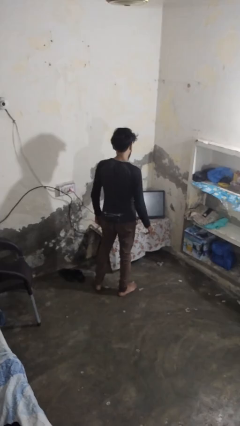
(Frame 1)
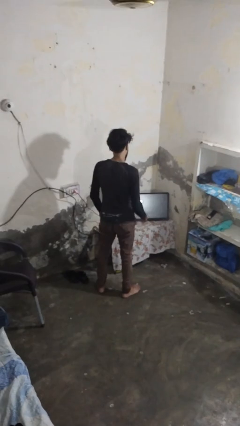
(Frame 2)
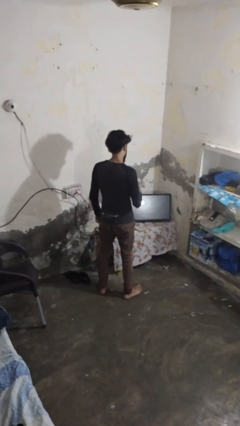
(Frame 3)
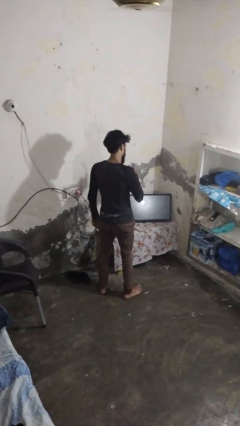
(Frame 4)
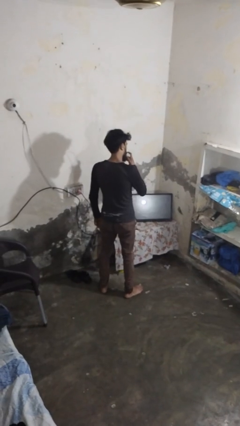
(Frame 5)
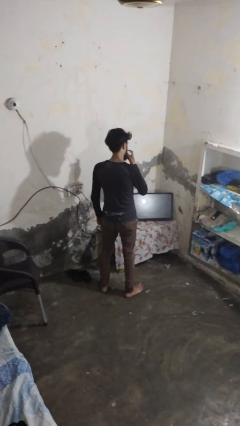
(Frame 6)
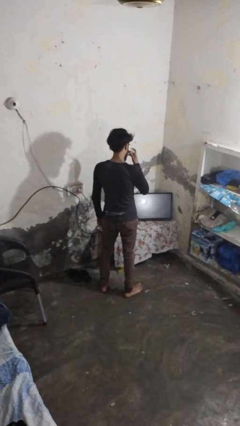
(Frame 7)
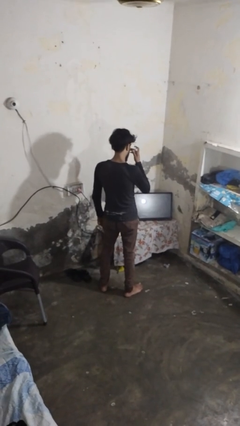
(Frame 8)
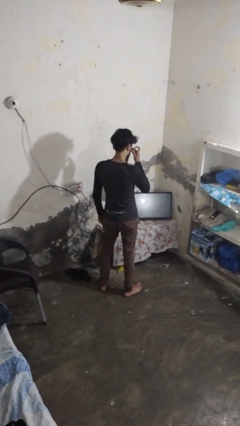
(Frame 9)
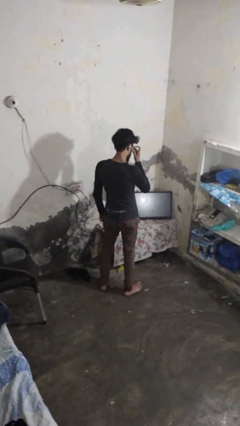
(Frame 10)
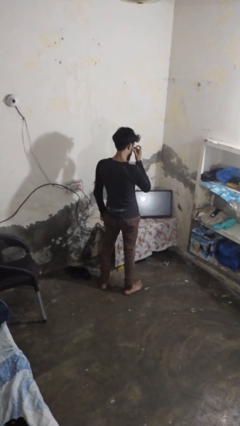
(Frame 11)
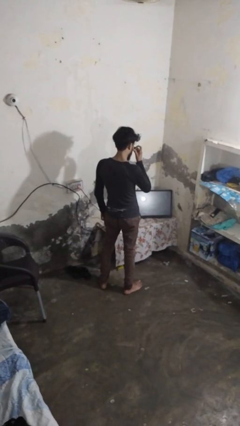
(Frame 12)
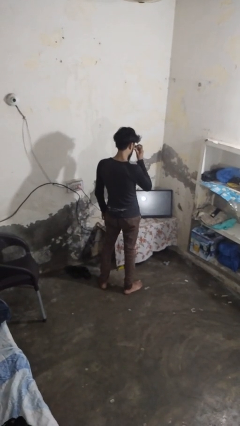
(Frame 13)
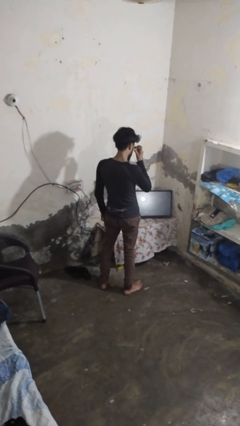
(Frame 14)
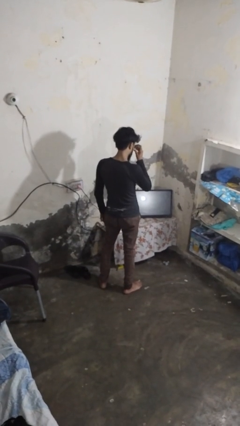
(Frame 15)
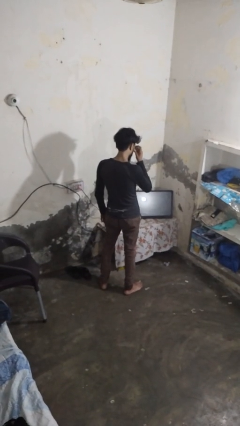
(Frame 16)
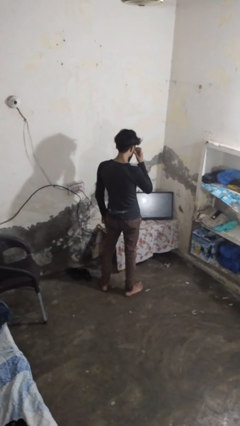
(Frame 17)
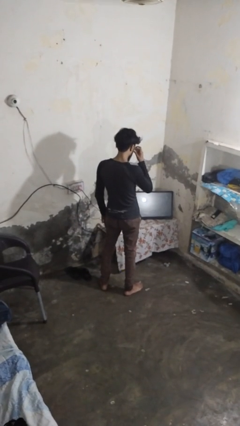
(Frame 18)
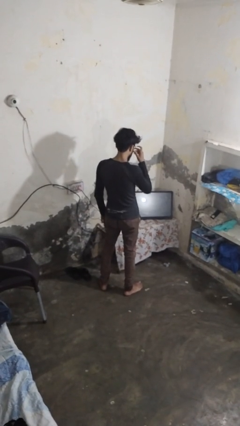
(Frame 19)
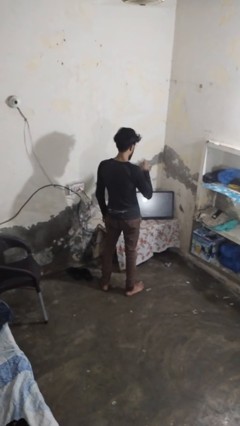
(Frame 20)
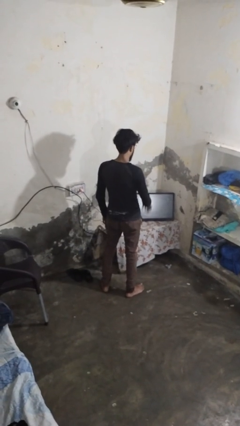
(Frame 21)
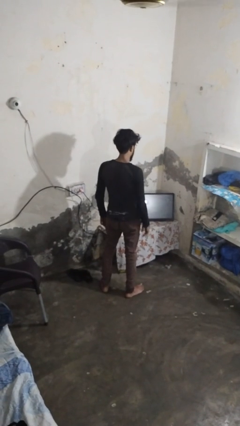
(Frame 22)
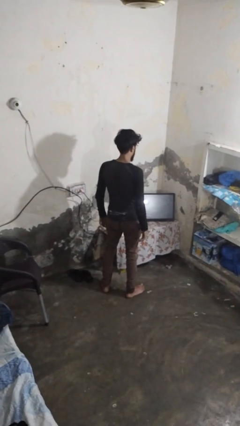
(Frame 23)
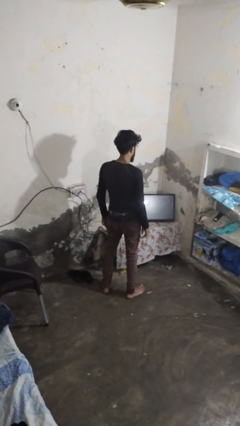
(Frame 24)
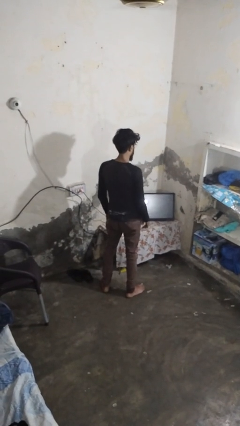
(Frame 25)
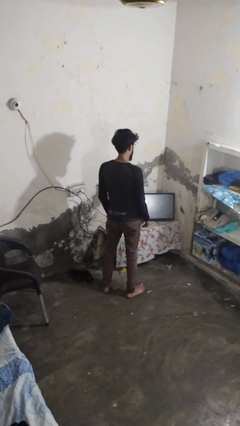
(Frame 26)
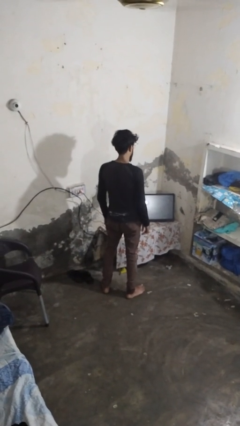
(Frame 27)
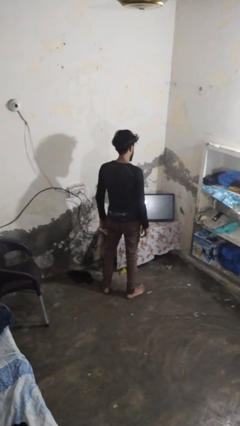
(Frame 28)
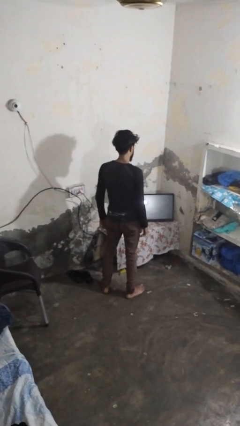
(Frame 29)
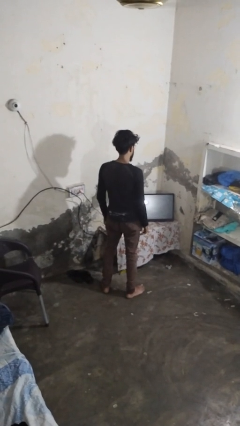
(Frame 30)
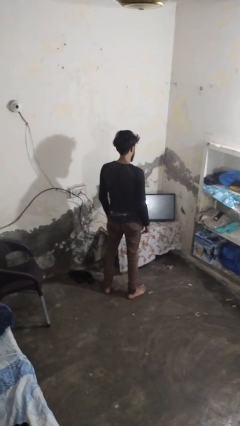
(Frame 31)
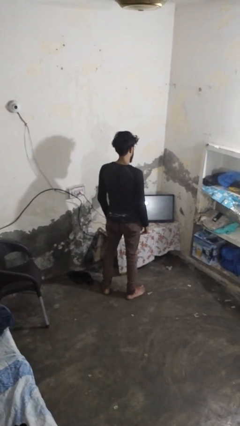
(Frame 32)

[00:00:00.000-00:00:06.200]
person puts on glasses

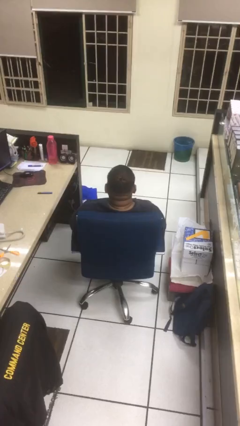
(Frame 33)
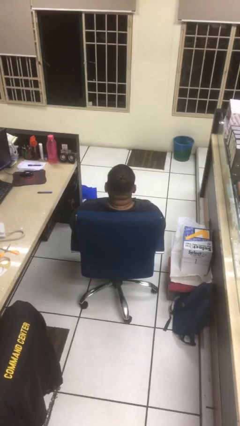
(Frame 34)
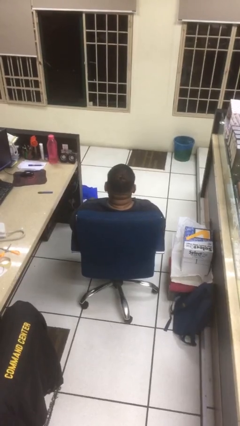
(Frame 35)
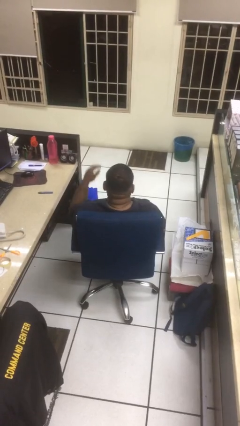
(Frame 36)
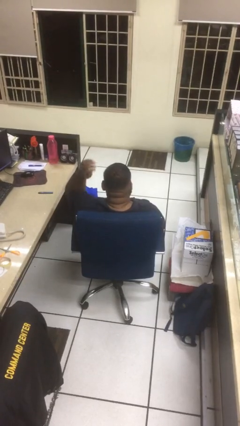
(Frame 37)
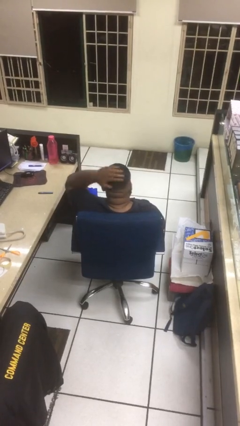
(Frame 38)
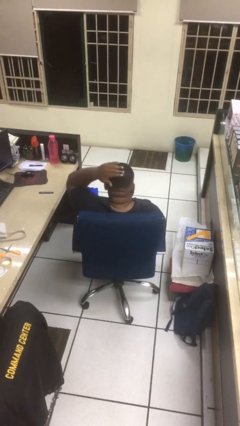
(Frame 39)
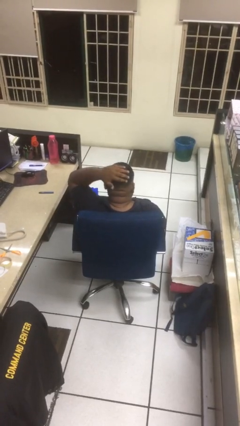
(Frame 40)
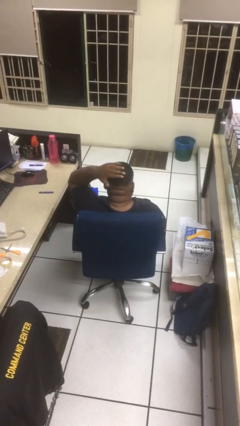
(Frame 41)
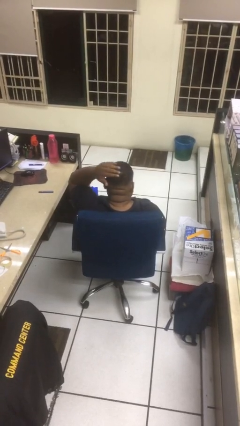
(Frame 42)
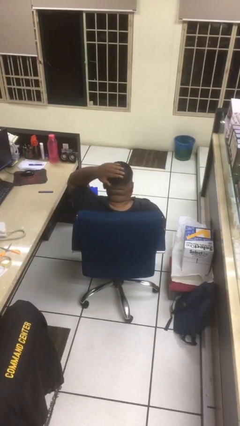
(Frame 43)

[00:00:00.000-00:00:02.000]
person pats head

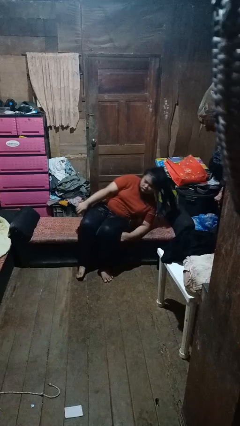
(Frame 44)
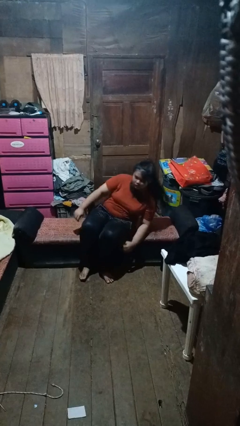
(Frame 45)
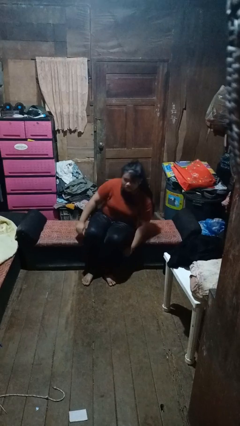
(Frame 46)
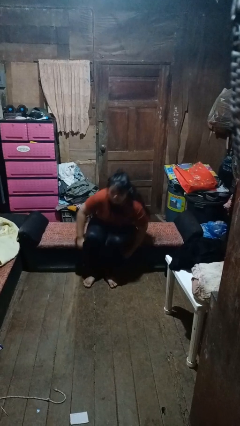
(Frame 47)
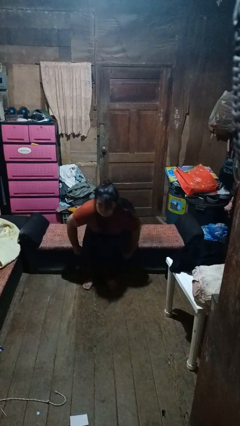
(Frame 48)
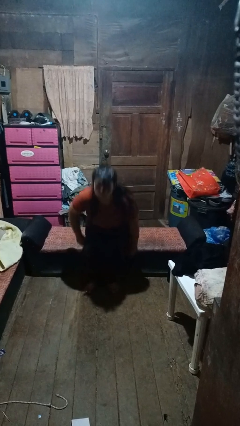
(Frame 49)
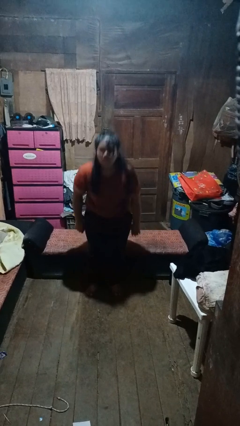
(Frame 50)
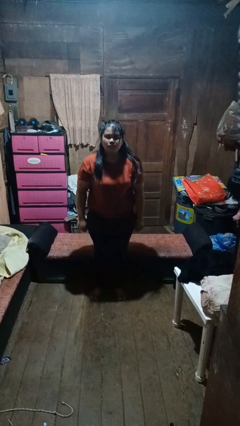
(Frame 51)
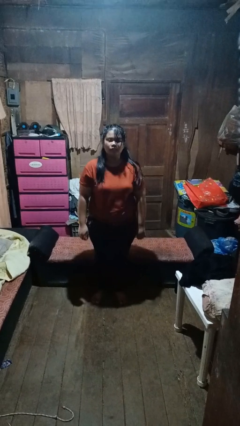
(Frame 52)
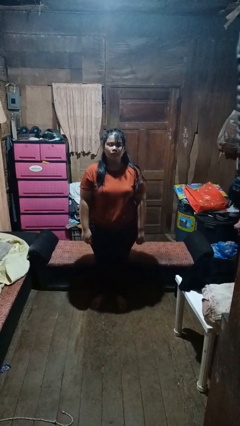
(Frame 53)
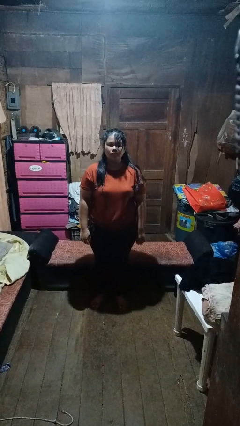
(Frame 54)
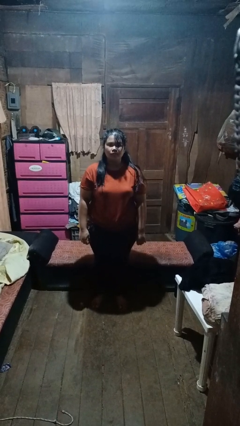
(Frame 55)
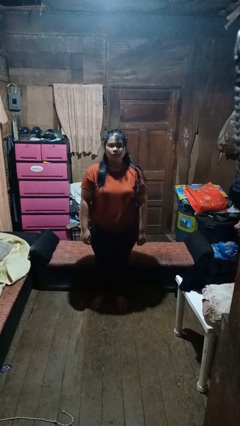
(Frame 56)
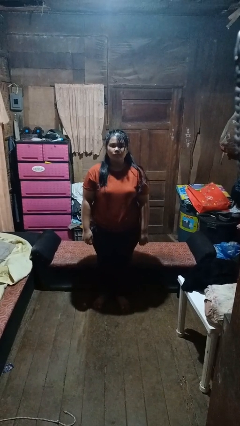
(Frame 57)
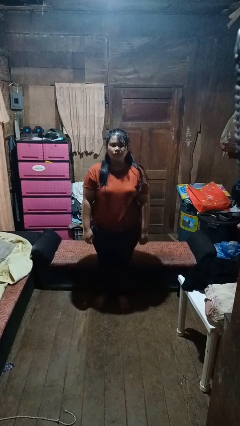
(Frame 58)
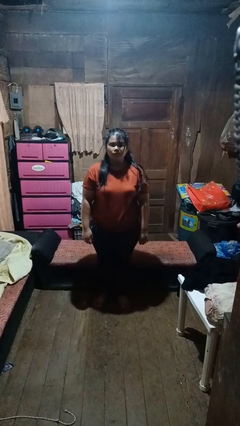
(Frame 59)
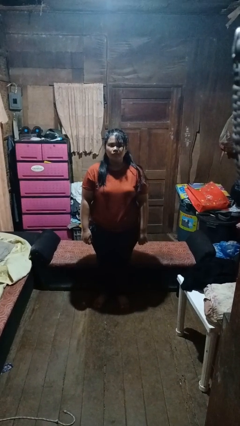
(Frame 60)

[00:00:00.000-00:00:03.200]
person stands up

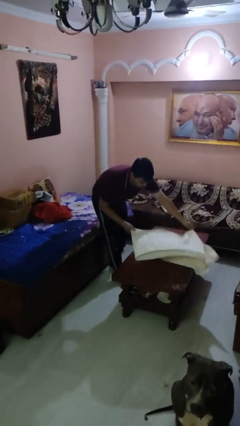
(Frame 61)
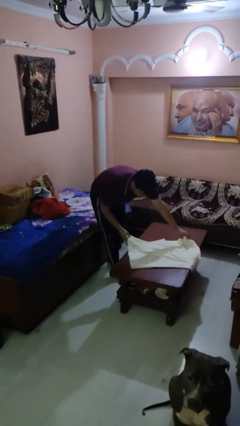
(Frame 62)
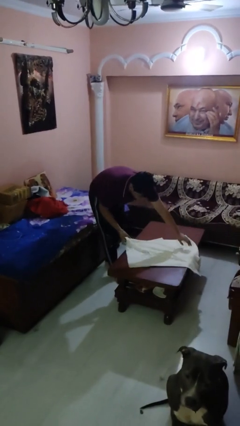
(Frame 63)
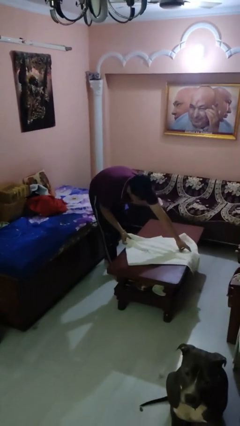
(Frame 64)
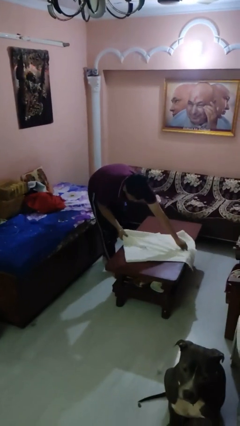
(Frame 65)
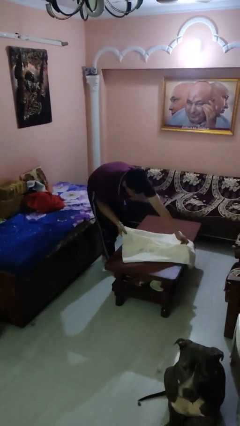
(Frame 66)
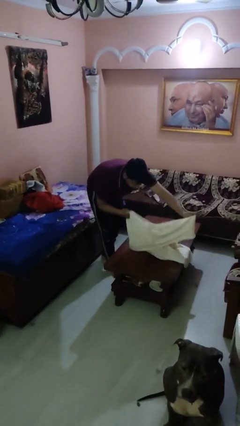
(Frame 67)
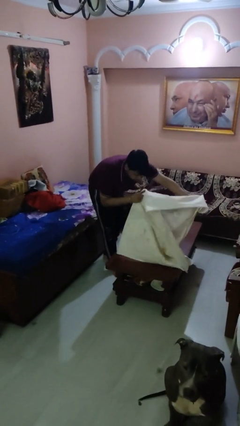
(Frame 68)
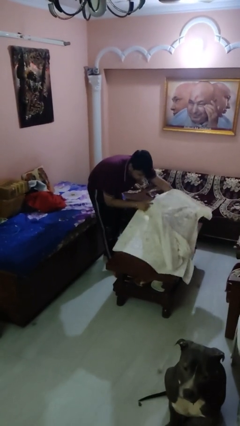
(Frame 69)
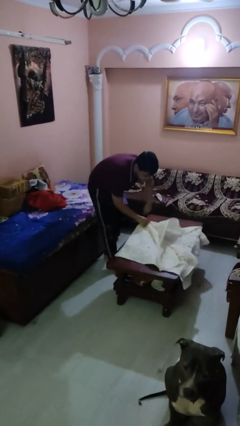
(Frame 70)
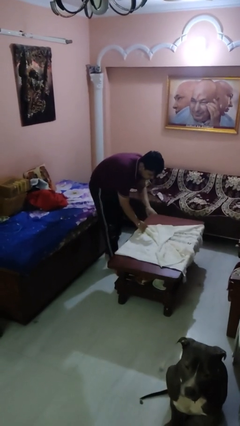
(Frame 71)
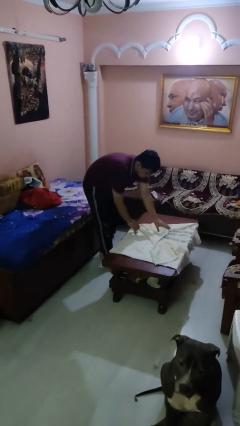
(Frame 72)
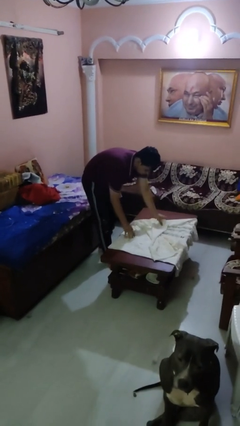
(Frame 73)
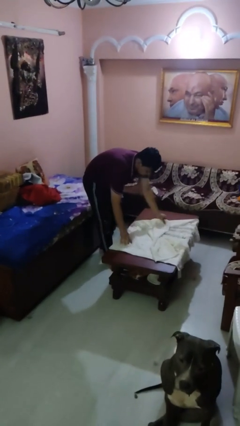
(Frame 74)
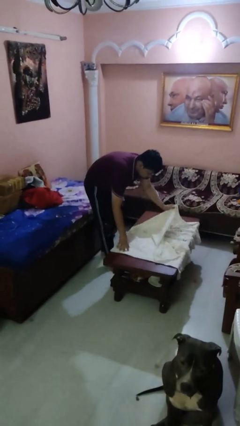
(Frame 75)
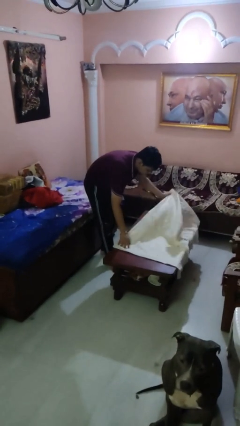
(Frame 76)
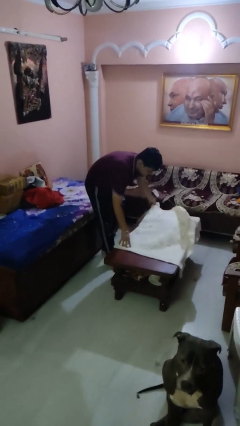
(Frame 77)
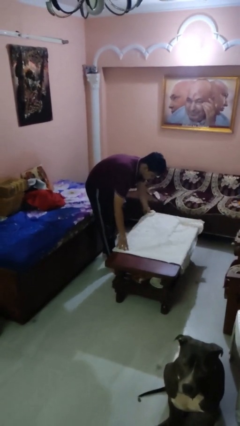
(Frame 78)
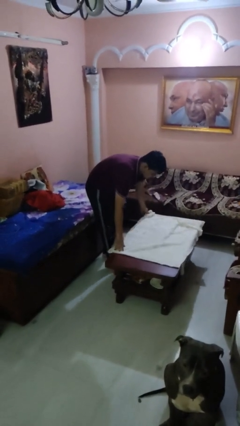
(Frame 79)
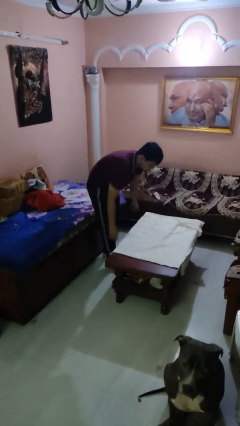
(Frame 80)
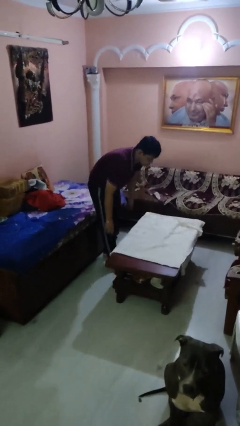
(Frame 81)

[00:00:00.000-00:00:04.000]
person spreads tablecloth

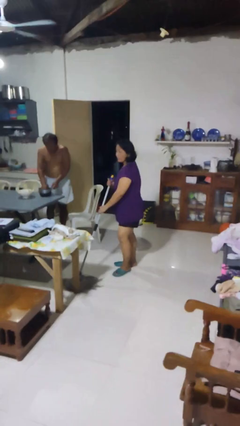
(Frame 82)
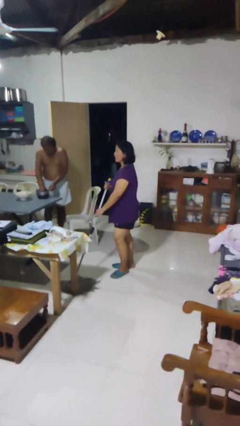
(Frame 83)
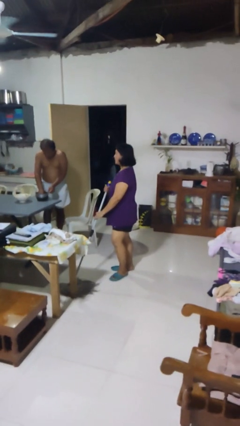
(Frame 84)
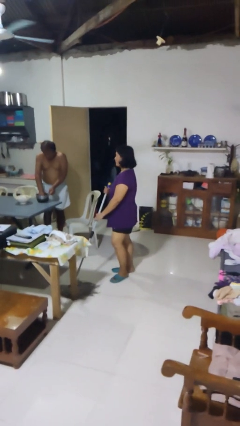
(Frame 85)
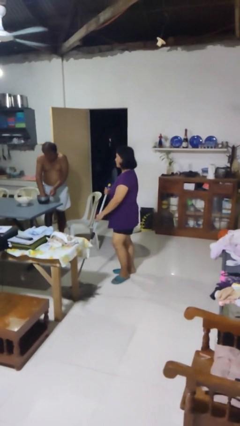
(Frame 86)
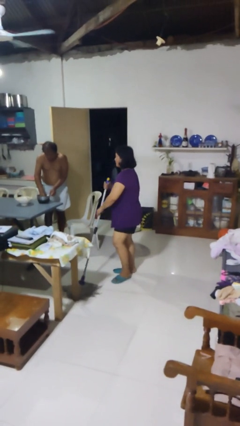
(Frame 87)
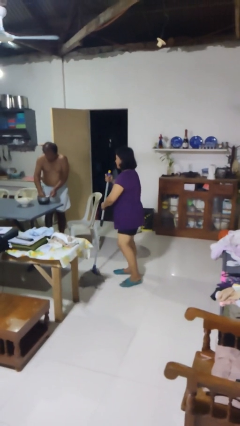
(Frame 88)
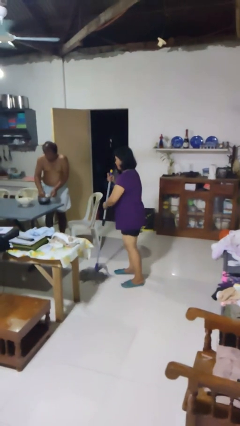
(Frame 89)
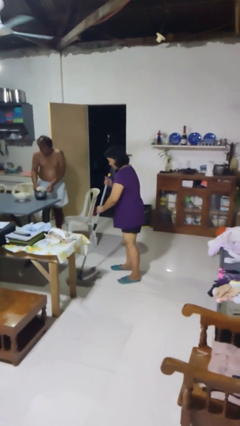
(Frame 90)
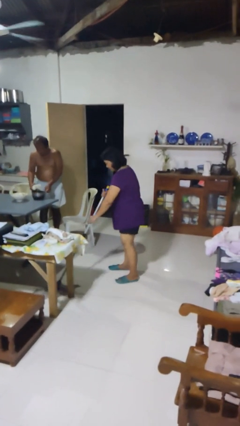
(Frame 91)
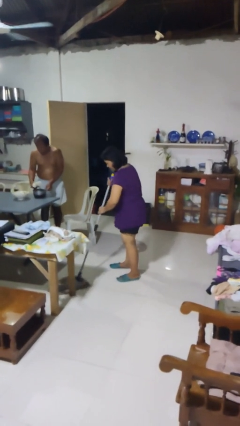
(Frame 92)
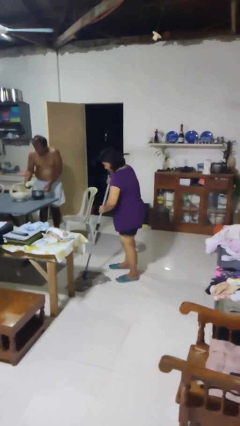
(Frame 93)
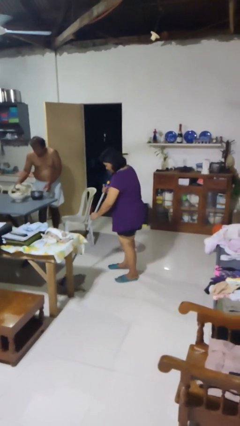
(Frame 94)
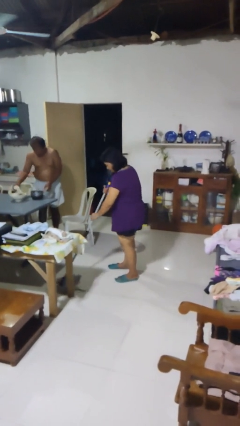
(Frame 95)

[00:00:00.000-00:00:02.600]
person mops
